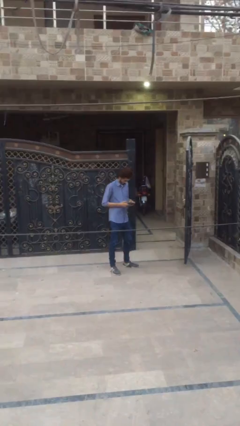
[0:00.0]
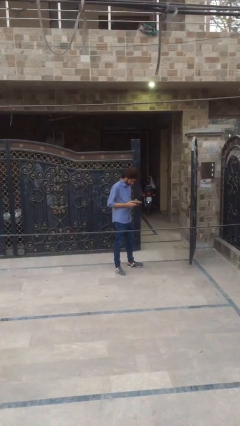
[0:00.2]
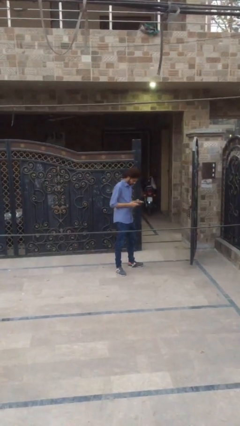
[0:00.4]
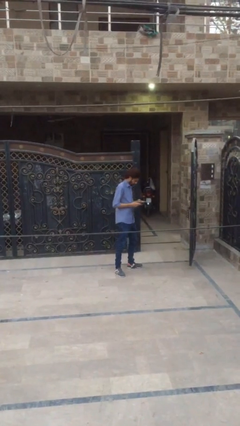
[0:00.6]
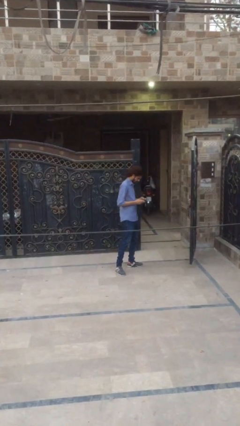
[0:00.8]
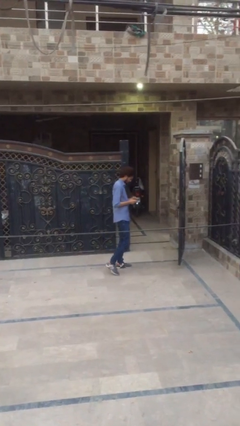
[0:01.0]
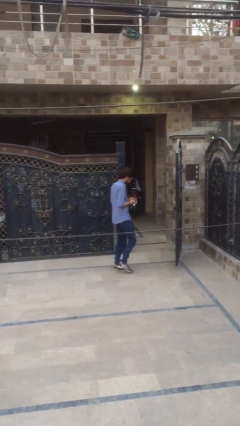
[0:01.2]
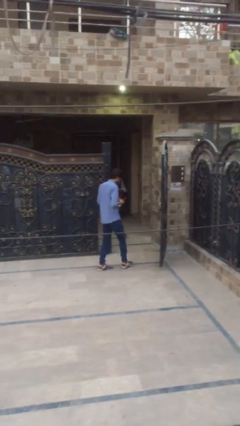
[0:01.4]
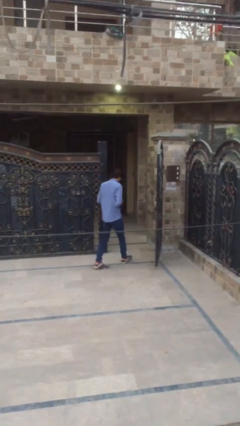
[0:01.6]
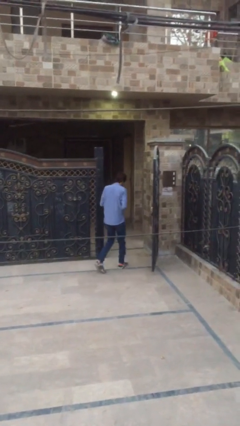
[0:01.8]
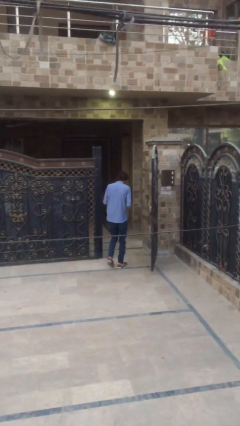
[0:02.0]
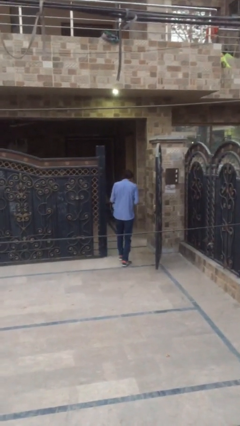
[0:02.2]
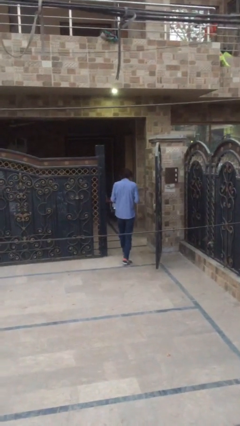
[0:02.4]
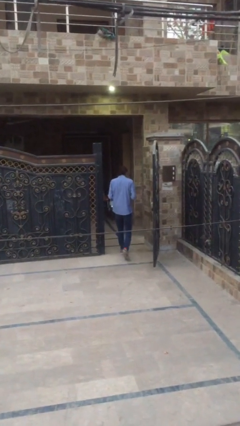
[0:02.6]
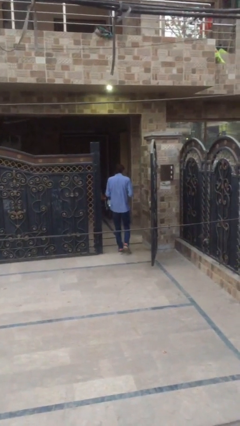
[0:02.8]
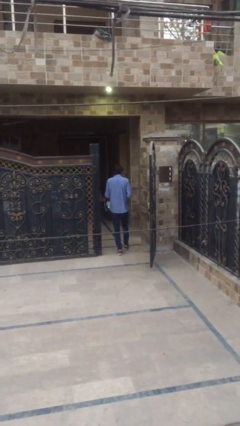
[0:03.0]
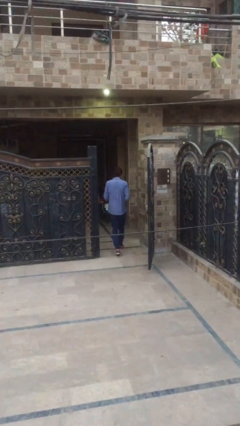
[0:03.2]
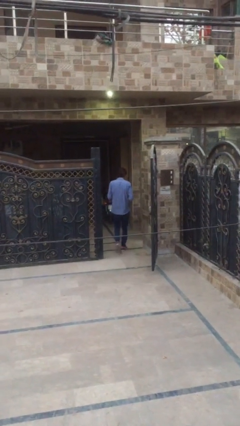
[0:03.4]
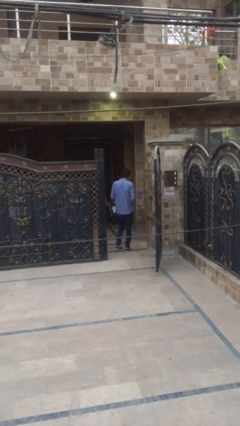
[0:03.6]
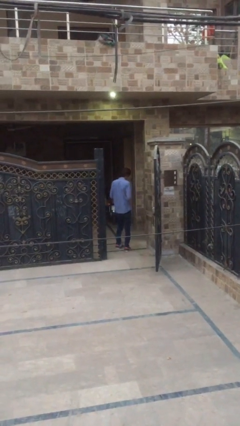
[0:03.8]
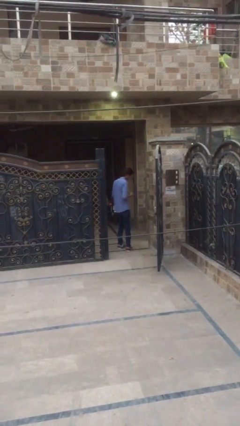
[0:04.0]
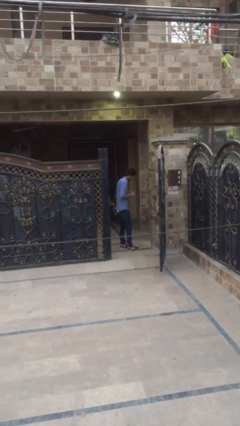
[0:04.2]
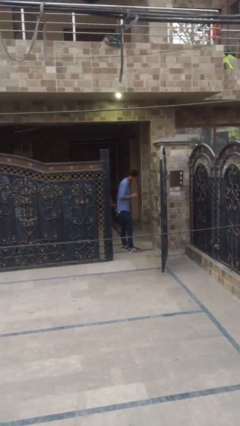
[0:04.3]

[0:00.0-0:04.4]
person enters scene through structure

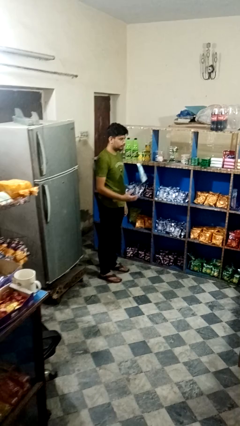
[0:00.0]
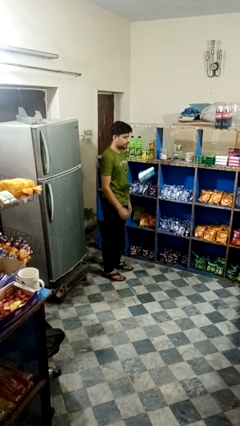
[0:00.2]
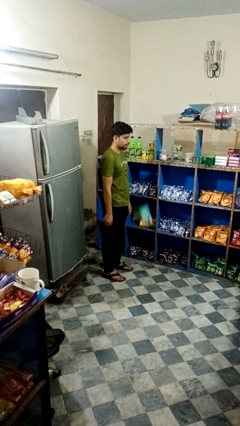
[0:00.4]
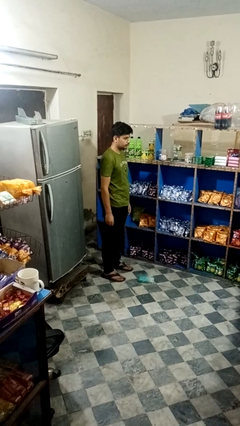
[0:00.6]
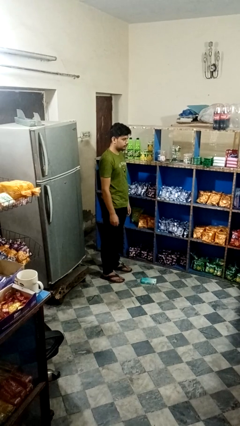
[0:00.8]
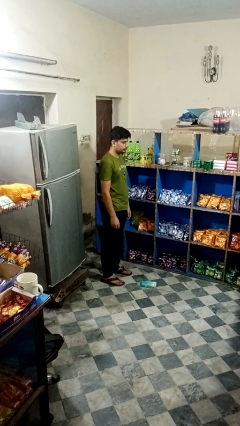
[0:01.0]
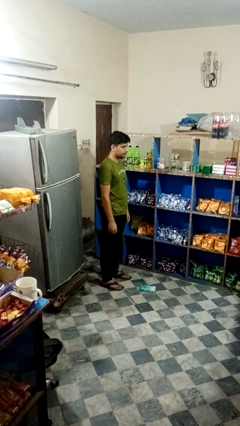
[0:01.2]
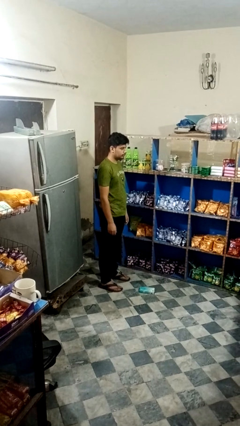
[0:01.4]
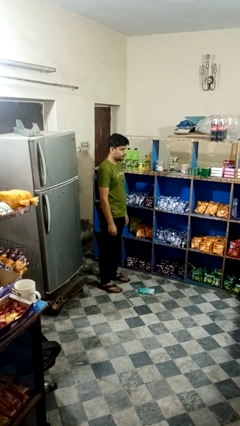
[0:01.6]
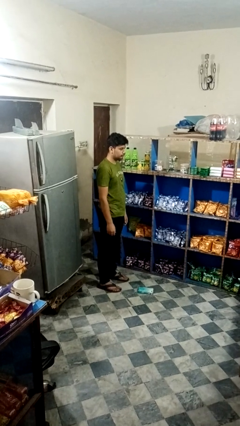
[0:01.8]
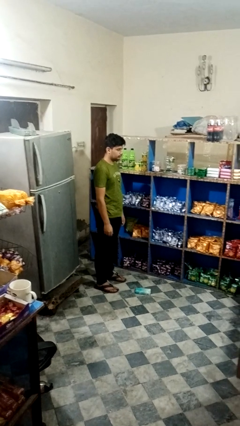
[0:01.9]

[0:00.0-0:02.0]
person throws object into air

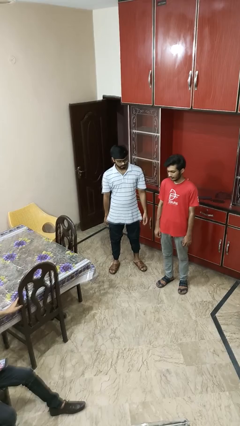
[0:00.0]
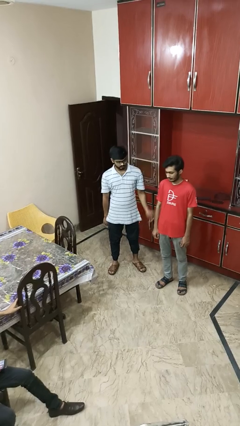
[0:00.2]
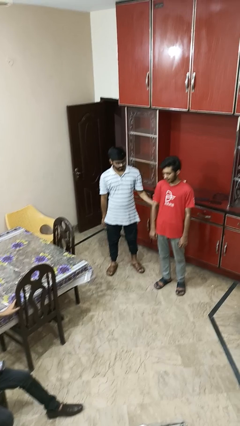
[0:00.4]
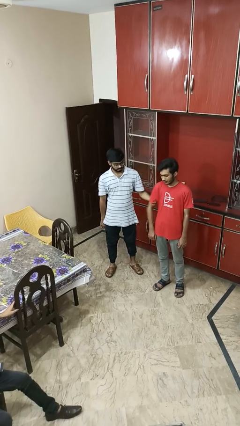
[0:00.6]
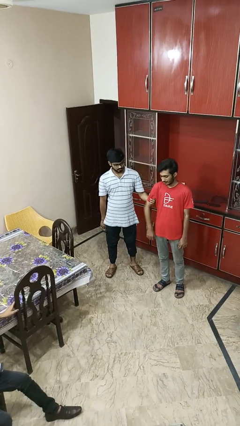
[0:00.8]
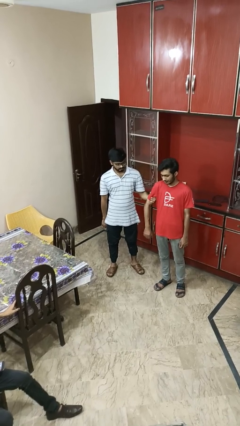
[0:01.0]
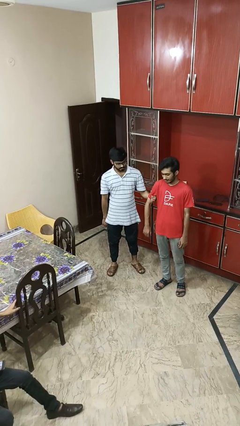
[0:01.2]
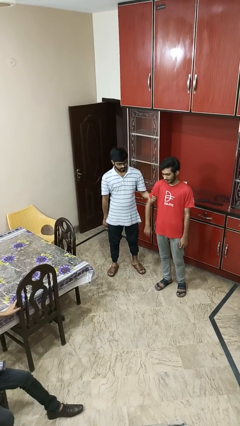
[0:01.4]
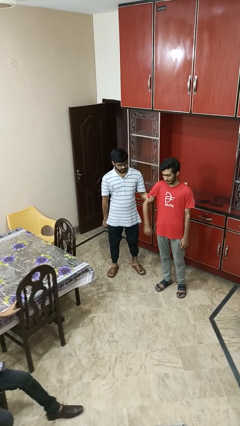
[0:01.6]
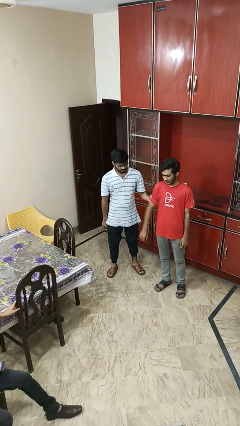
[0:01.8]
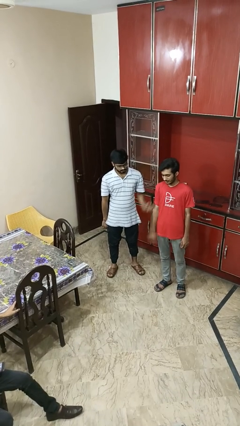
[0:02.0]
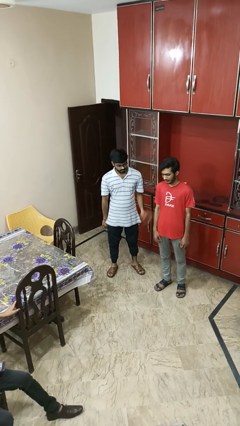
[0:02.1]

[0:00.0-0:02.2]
person grabs person by bicep

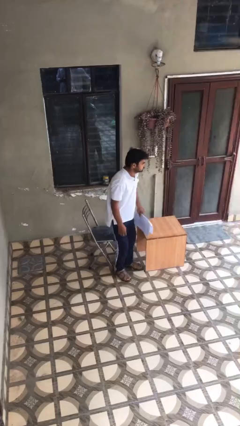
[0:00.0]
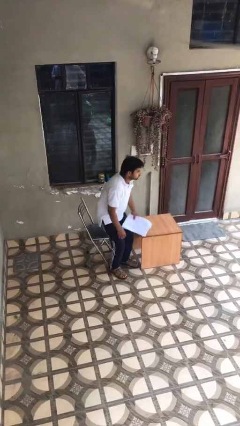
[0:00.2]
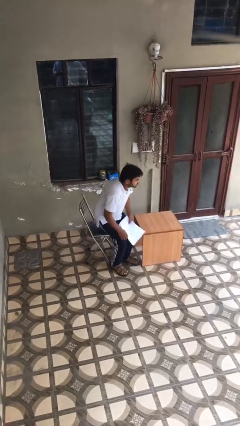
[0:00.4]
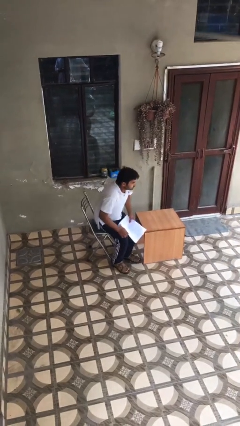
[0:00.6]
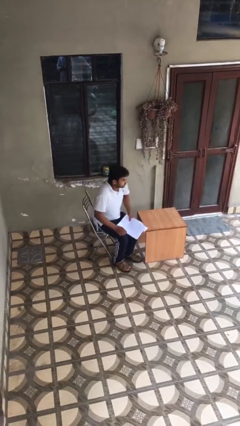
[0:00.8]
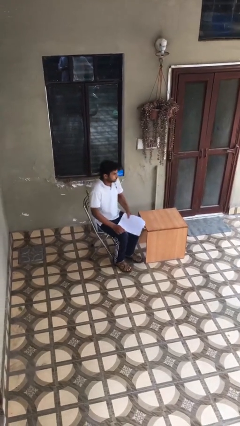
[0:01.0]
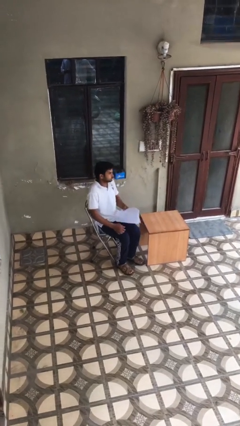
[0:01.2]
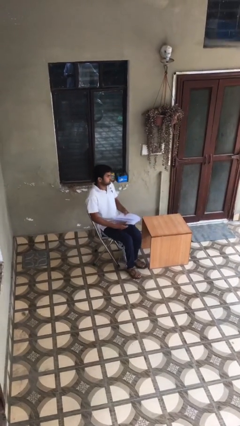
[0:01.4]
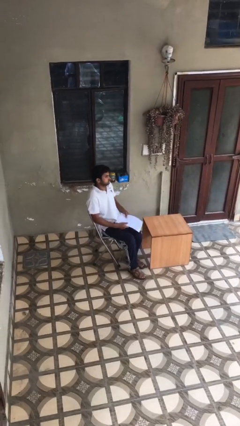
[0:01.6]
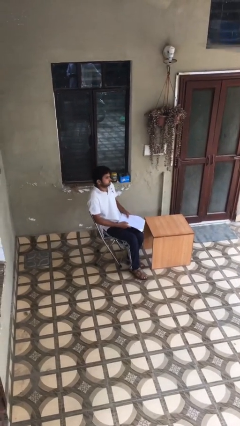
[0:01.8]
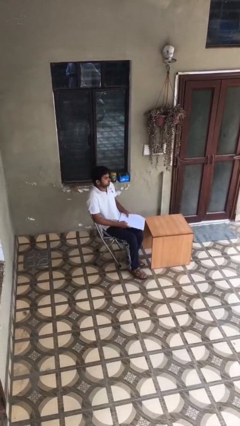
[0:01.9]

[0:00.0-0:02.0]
person sits down

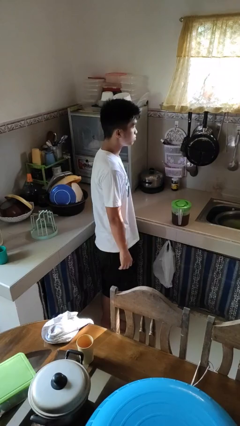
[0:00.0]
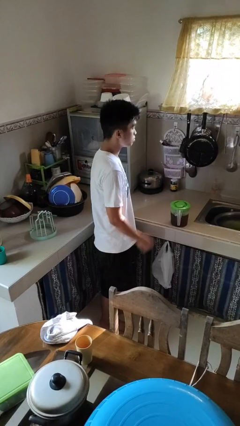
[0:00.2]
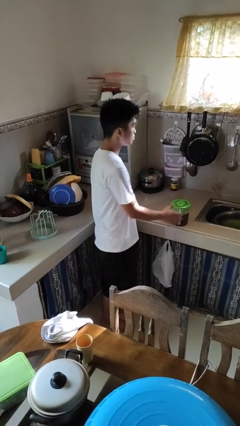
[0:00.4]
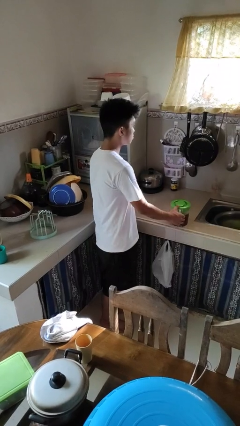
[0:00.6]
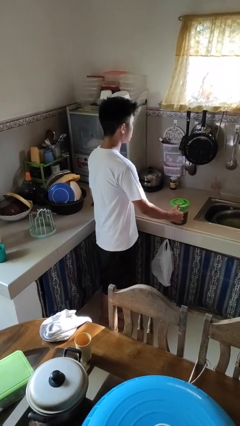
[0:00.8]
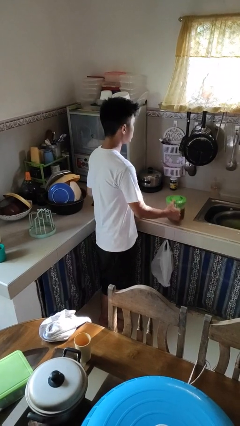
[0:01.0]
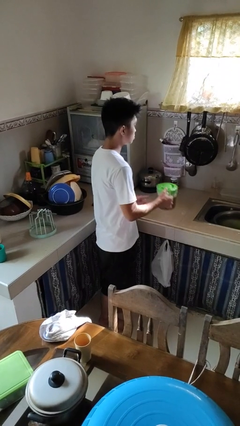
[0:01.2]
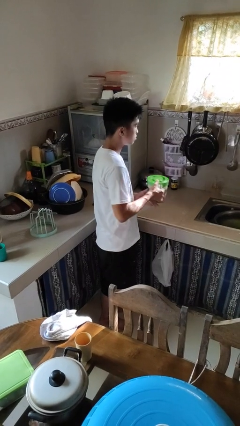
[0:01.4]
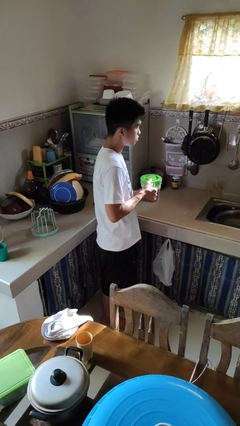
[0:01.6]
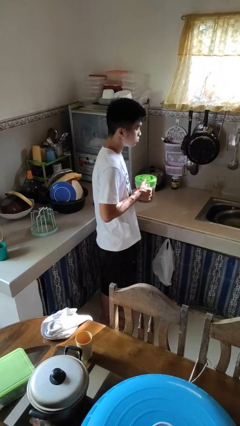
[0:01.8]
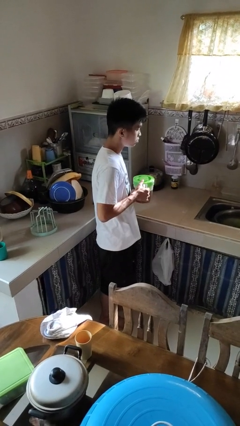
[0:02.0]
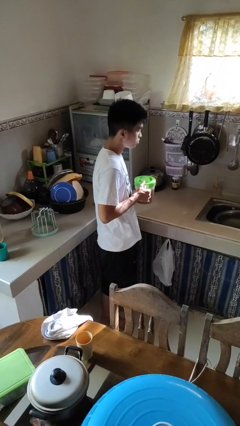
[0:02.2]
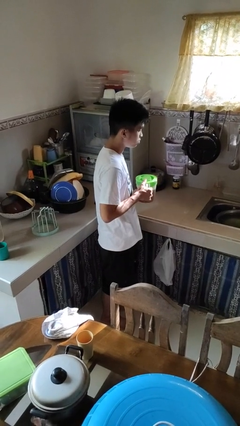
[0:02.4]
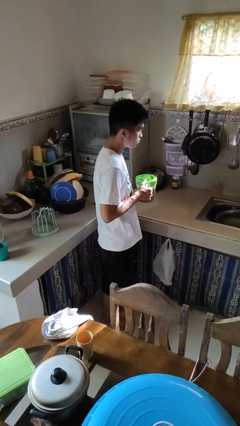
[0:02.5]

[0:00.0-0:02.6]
person picks up object from countertop

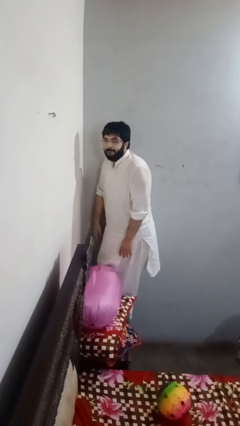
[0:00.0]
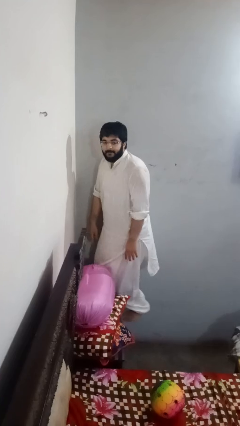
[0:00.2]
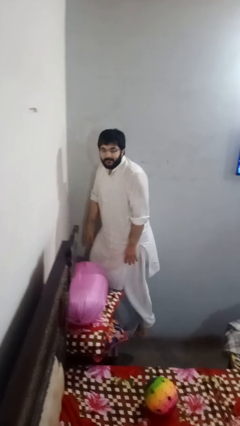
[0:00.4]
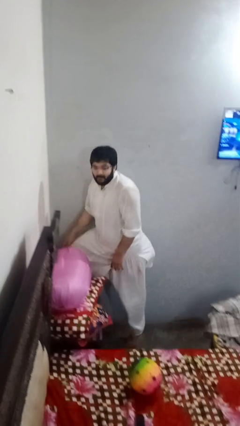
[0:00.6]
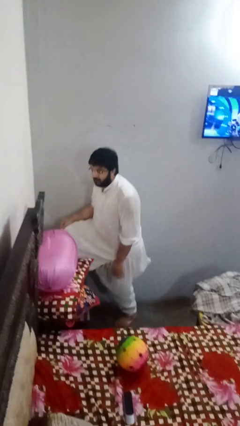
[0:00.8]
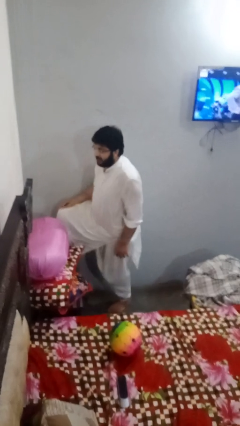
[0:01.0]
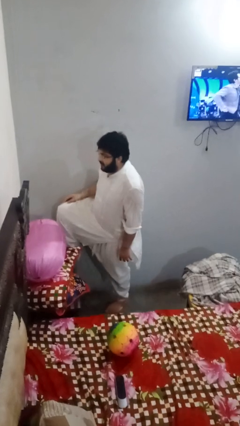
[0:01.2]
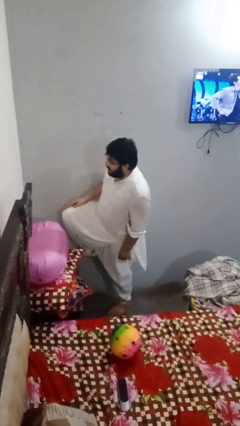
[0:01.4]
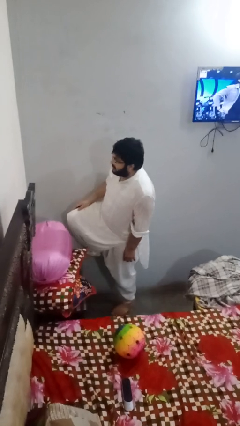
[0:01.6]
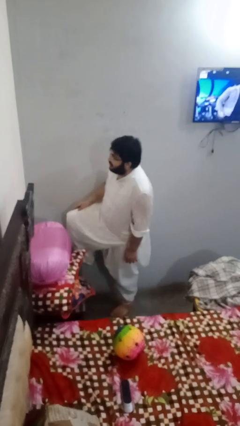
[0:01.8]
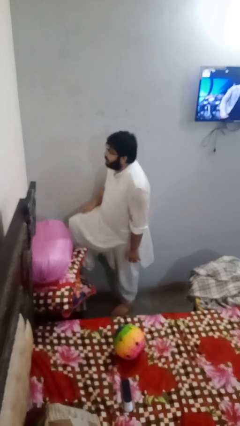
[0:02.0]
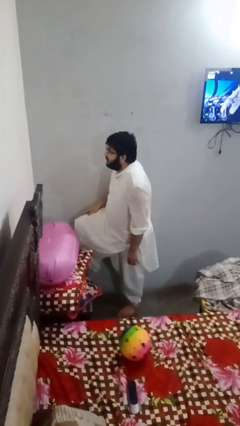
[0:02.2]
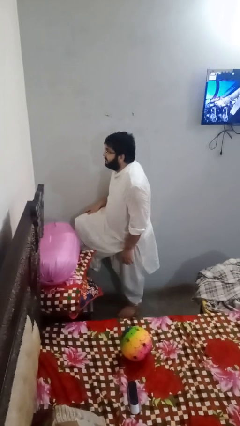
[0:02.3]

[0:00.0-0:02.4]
person climbs off table

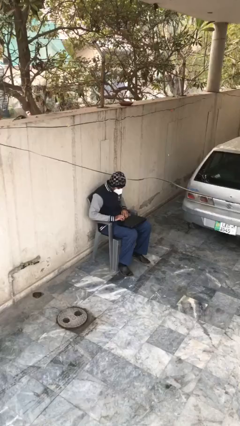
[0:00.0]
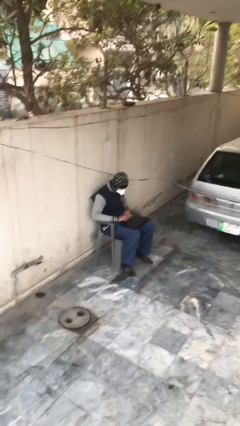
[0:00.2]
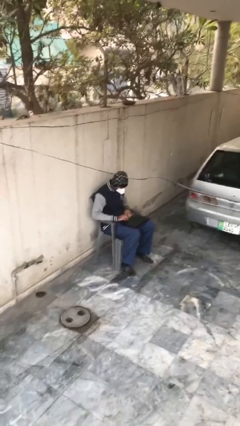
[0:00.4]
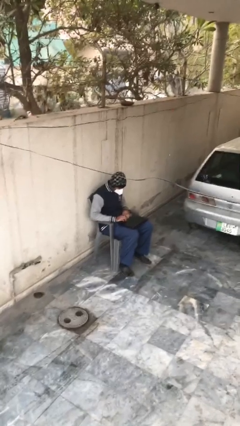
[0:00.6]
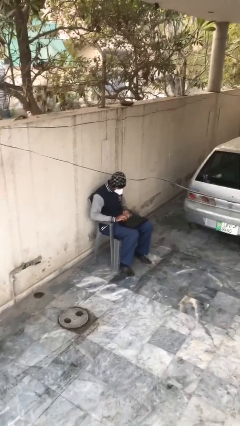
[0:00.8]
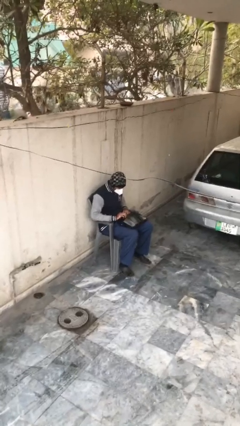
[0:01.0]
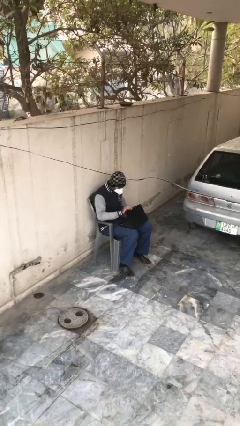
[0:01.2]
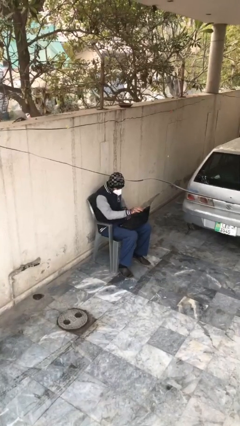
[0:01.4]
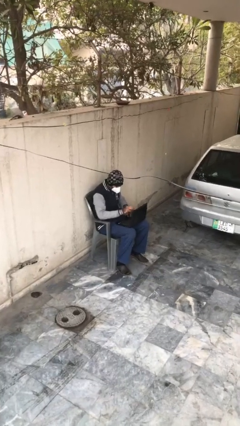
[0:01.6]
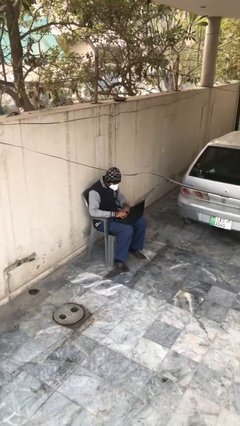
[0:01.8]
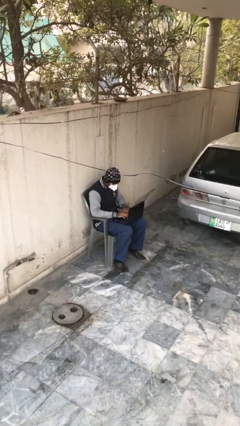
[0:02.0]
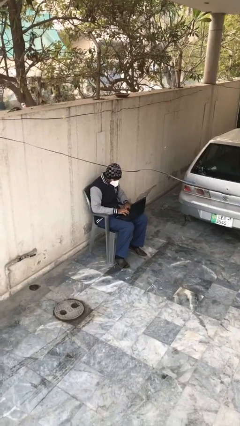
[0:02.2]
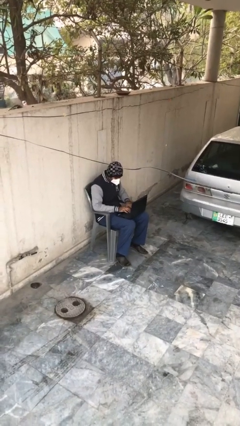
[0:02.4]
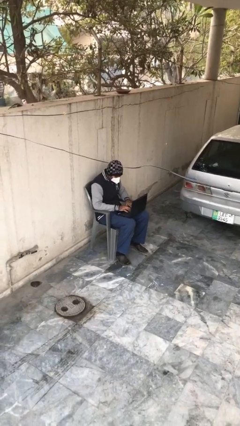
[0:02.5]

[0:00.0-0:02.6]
person interacts with laptop
